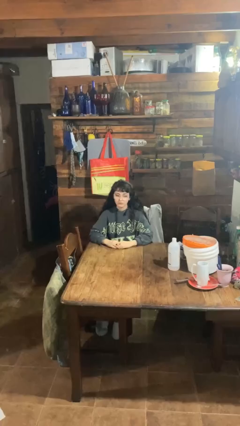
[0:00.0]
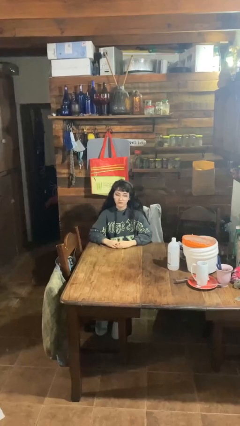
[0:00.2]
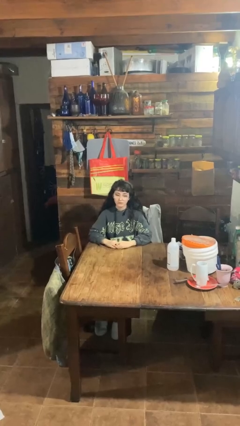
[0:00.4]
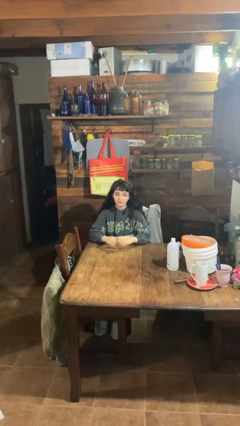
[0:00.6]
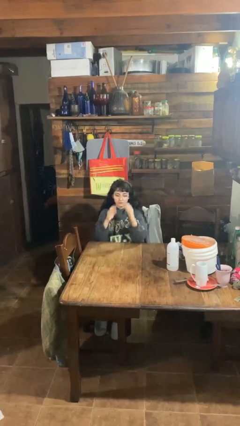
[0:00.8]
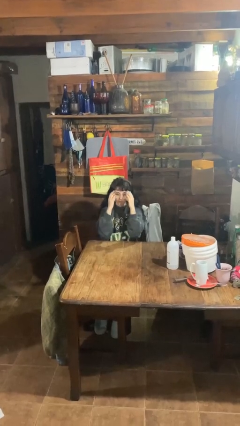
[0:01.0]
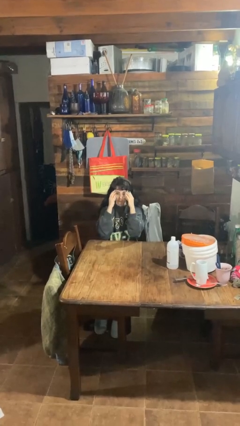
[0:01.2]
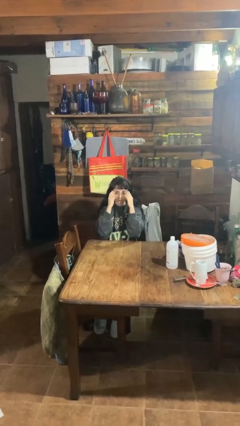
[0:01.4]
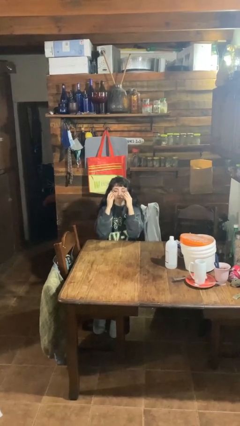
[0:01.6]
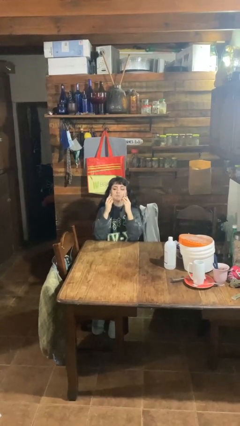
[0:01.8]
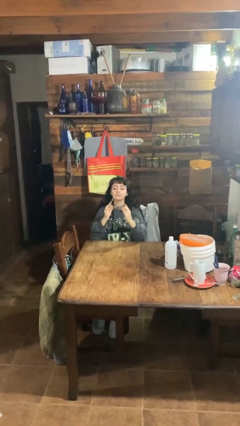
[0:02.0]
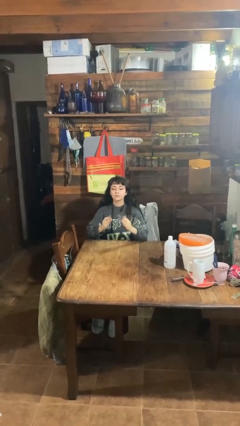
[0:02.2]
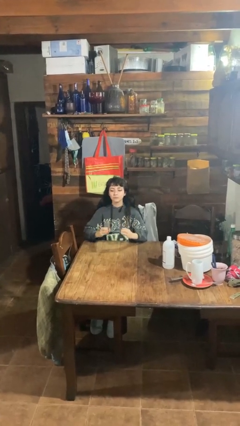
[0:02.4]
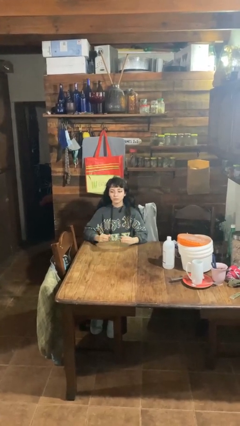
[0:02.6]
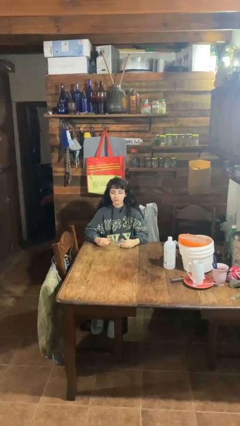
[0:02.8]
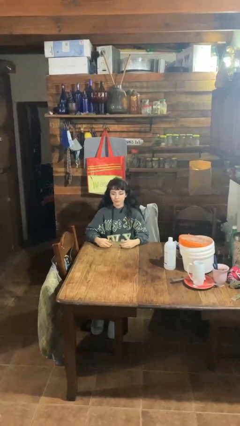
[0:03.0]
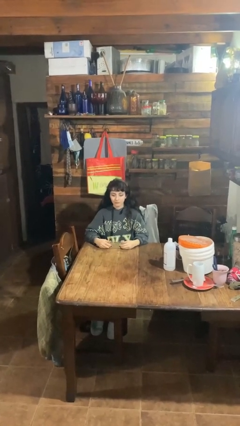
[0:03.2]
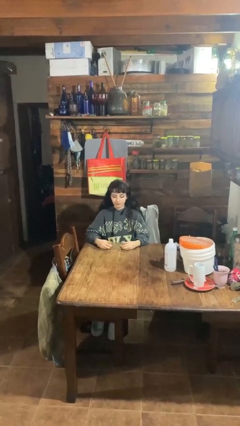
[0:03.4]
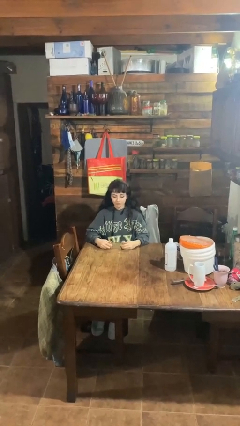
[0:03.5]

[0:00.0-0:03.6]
person takes off glasses

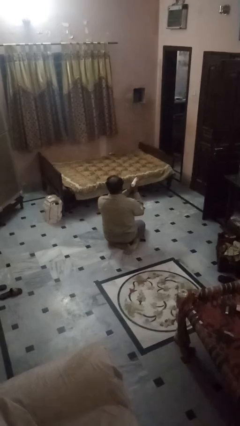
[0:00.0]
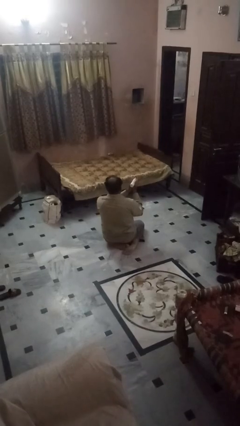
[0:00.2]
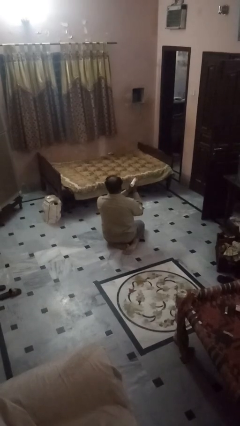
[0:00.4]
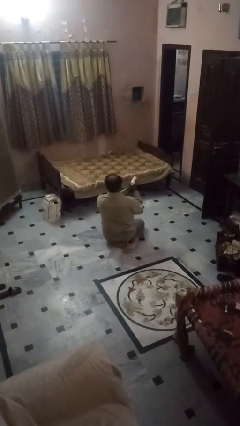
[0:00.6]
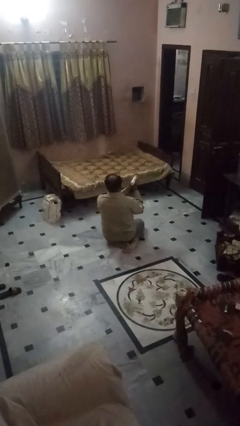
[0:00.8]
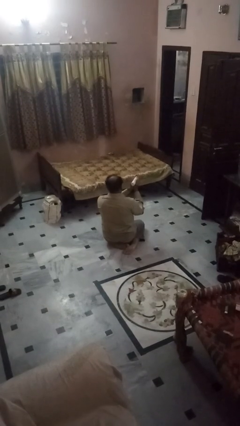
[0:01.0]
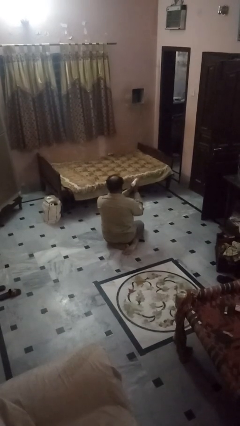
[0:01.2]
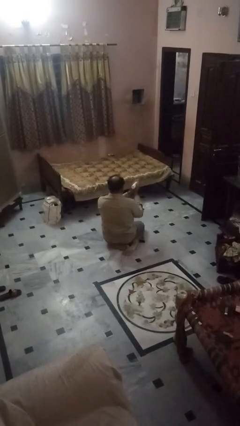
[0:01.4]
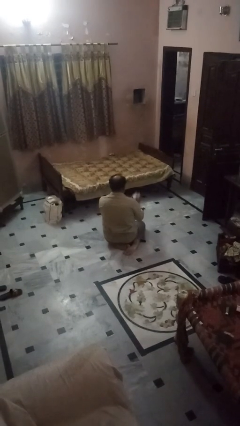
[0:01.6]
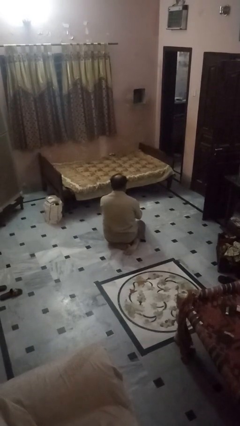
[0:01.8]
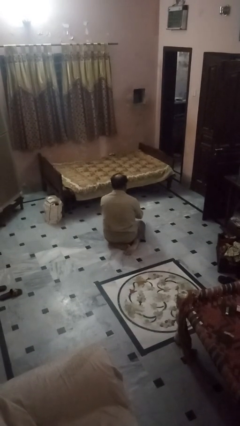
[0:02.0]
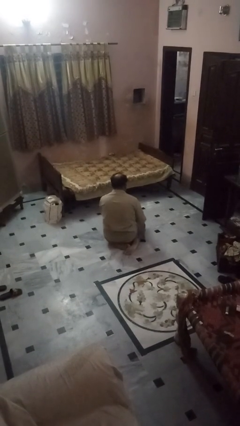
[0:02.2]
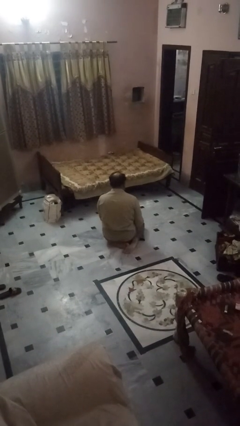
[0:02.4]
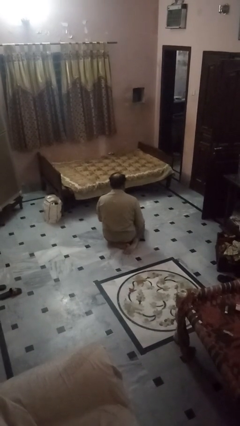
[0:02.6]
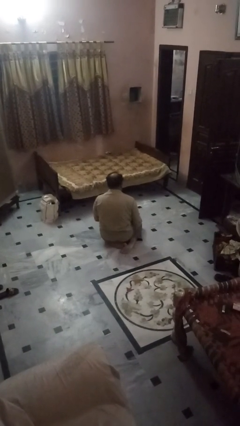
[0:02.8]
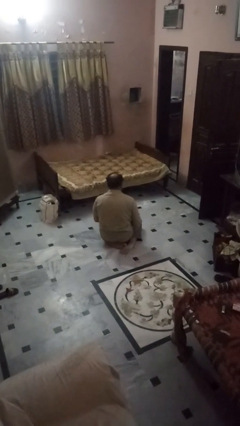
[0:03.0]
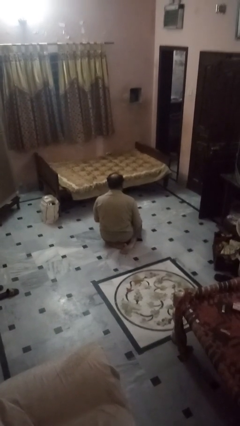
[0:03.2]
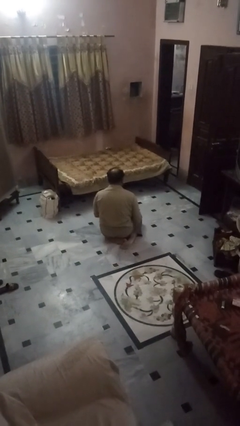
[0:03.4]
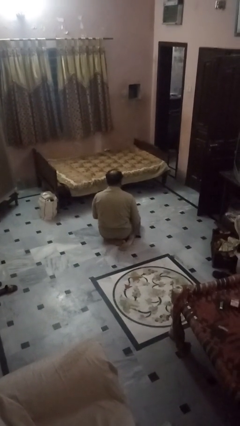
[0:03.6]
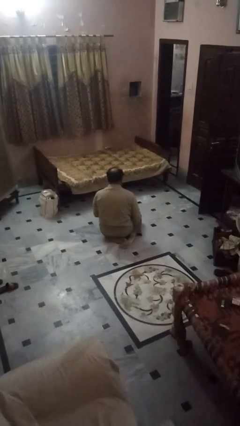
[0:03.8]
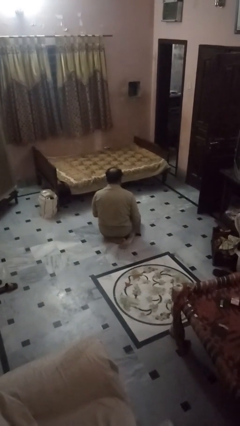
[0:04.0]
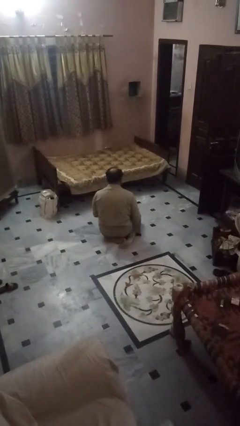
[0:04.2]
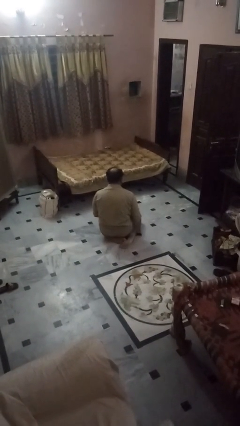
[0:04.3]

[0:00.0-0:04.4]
person catches dropped object

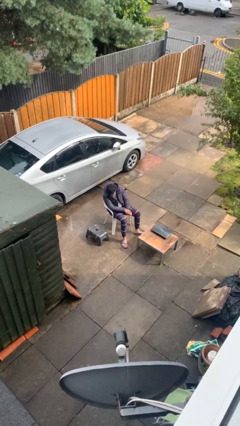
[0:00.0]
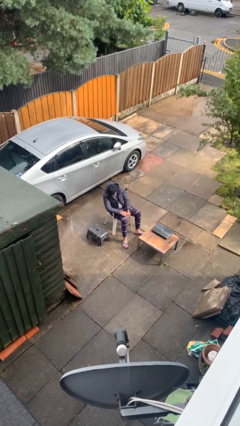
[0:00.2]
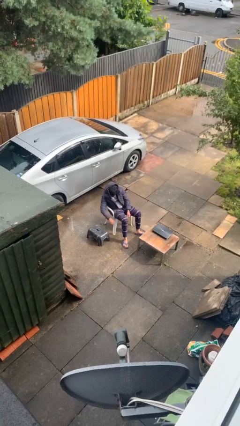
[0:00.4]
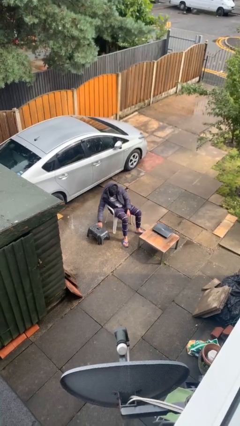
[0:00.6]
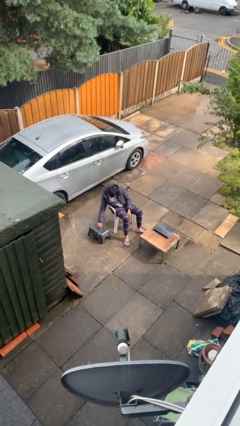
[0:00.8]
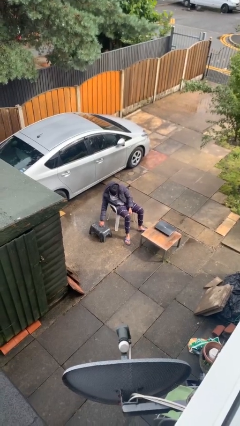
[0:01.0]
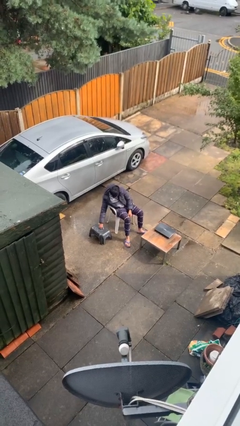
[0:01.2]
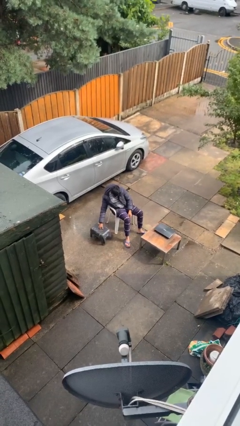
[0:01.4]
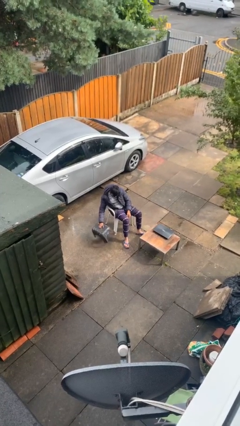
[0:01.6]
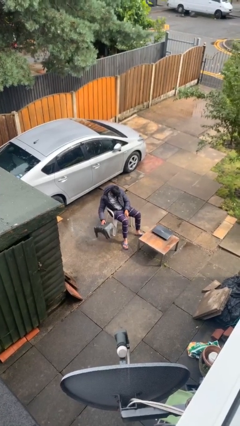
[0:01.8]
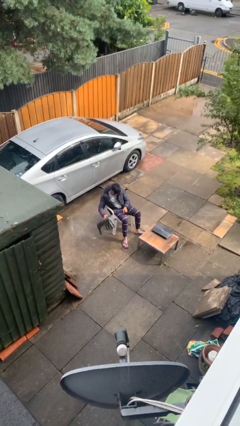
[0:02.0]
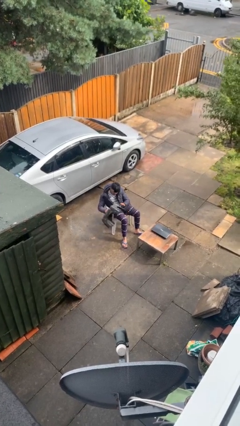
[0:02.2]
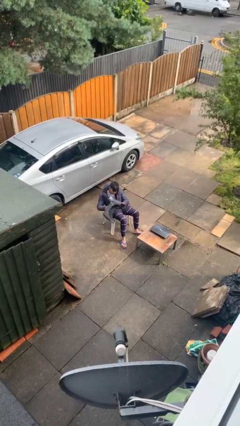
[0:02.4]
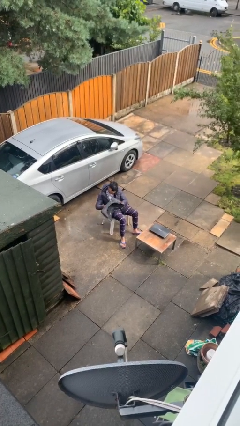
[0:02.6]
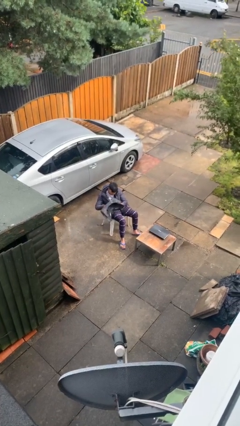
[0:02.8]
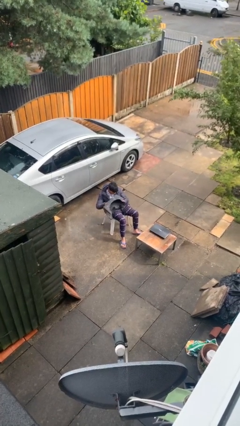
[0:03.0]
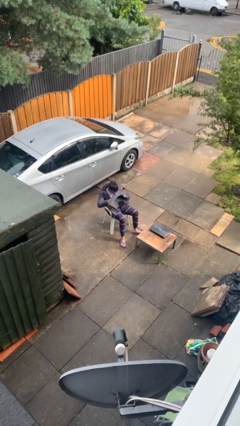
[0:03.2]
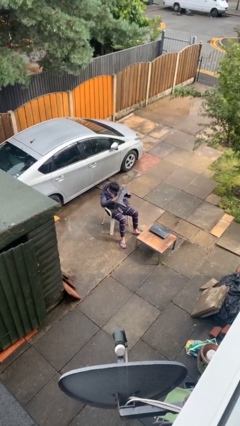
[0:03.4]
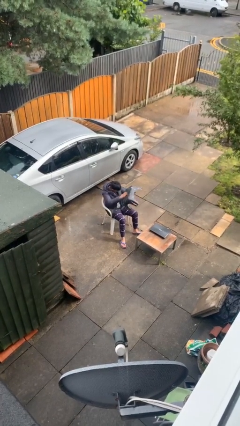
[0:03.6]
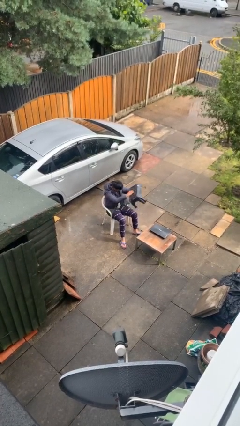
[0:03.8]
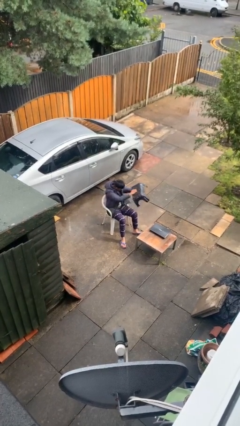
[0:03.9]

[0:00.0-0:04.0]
person picks up object from floor

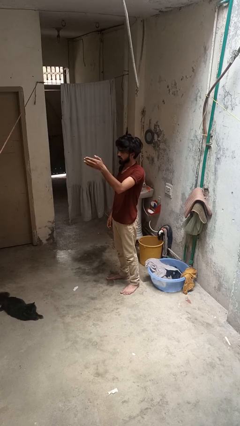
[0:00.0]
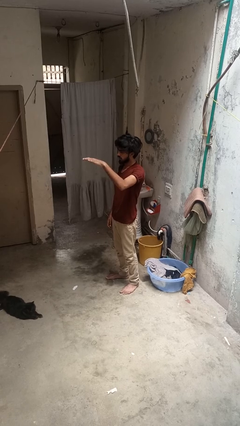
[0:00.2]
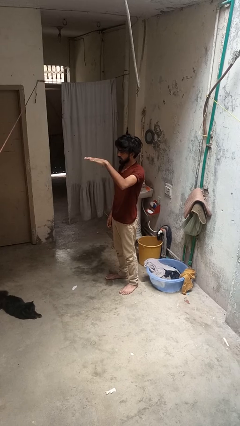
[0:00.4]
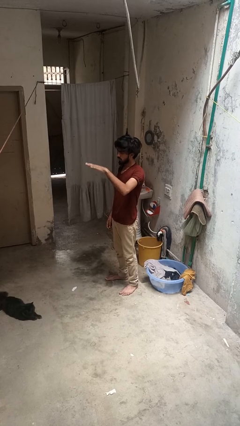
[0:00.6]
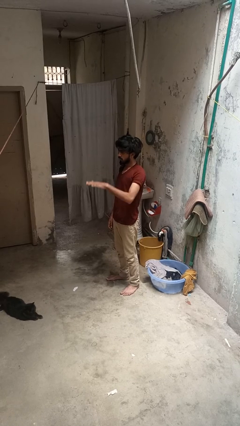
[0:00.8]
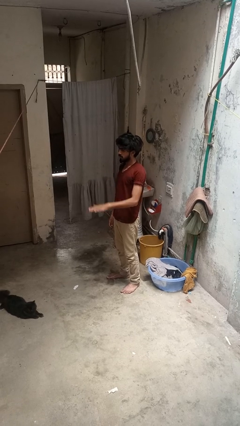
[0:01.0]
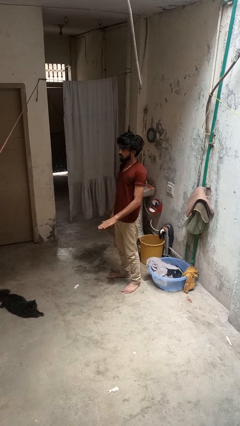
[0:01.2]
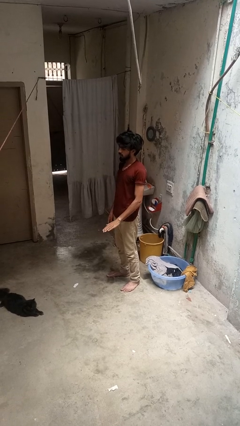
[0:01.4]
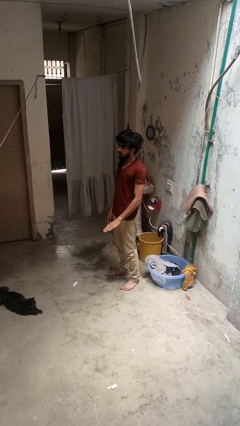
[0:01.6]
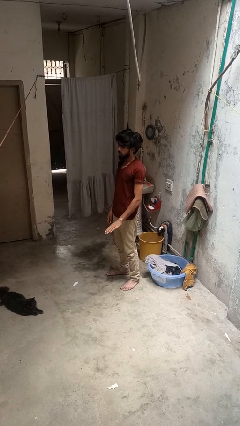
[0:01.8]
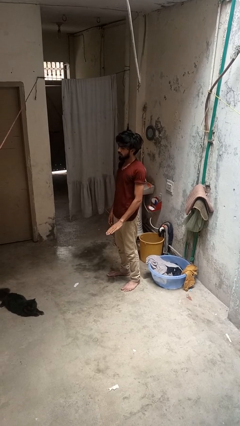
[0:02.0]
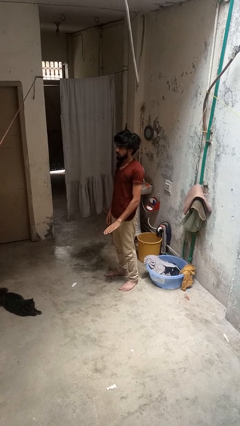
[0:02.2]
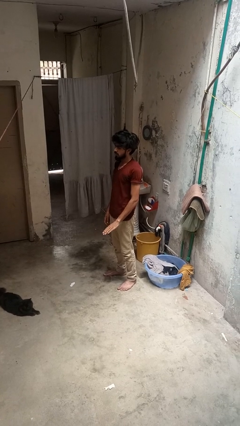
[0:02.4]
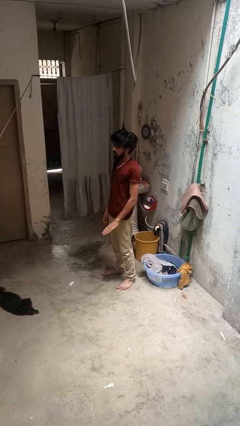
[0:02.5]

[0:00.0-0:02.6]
person gestures swipe down

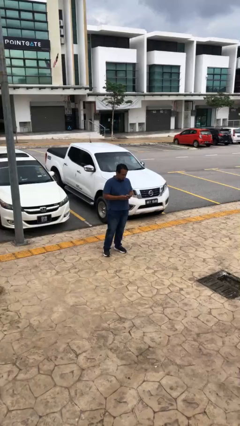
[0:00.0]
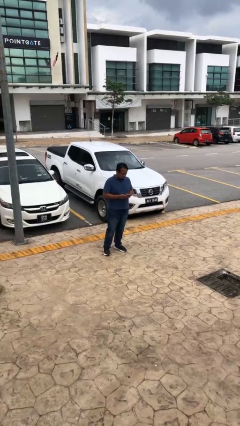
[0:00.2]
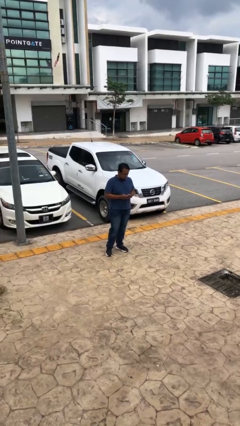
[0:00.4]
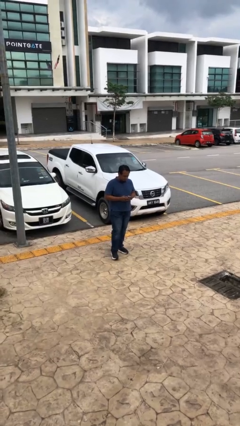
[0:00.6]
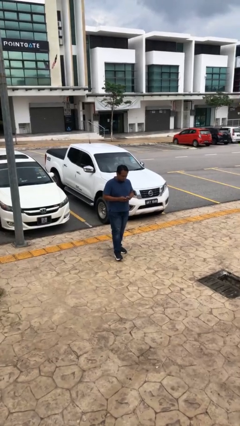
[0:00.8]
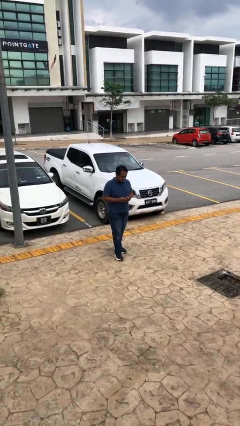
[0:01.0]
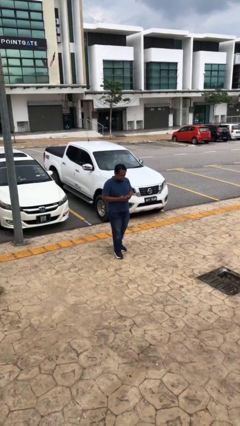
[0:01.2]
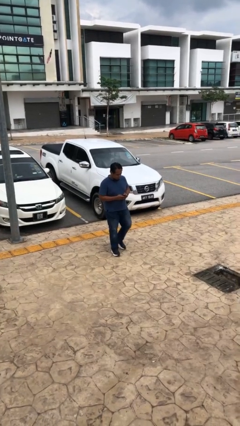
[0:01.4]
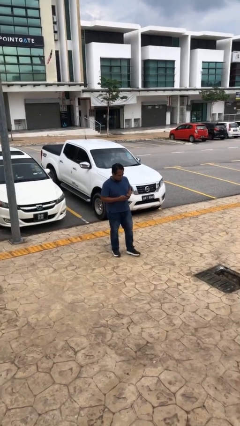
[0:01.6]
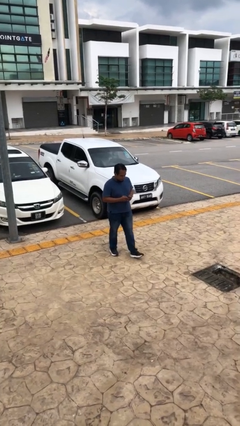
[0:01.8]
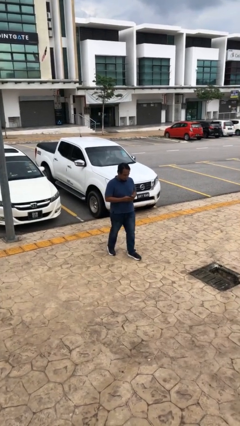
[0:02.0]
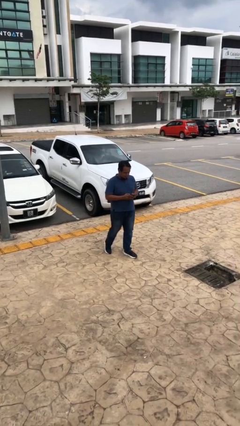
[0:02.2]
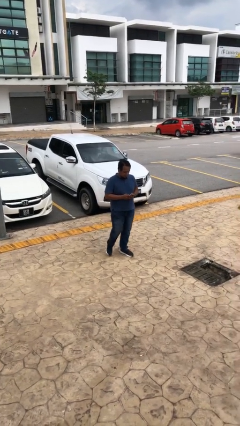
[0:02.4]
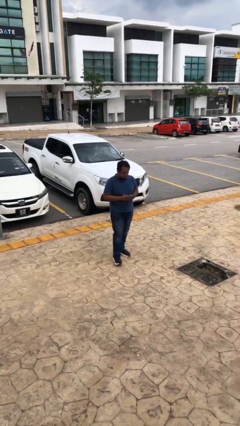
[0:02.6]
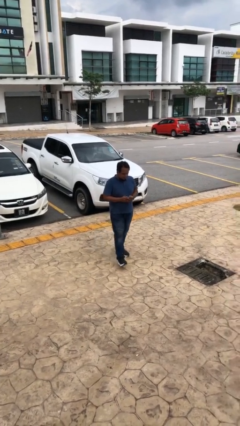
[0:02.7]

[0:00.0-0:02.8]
person texts on phone
